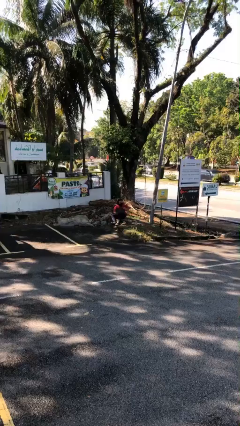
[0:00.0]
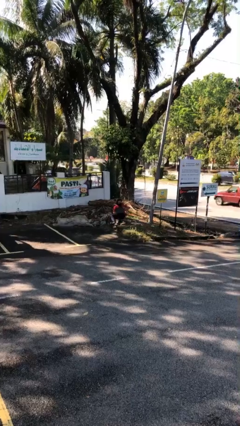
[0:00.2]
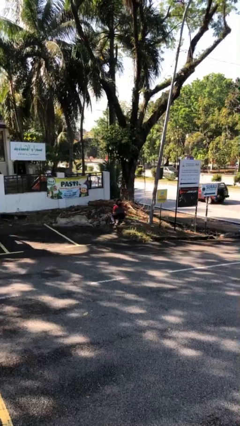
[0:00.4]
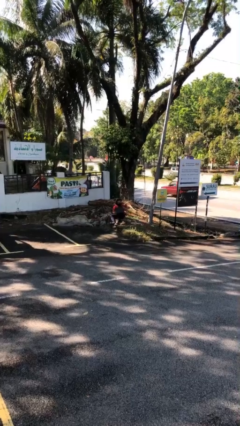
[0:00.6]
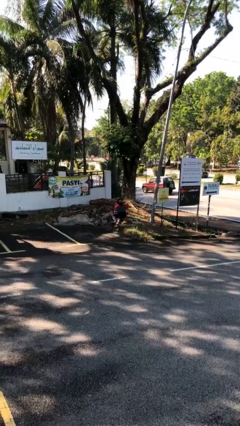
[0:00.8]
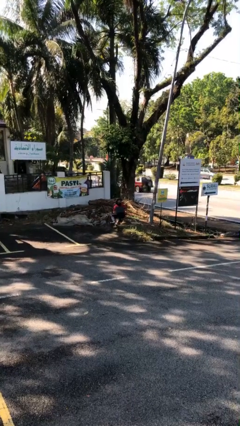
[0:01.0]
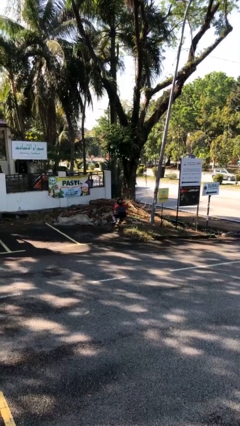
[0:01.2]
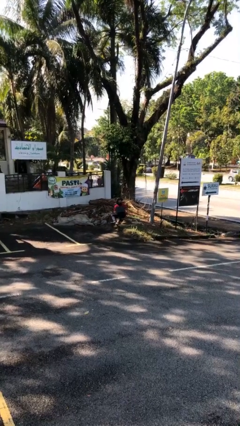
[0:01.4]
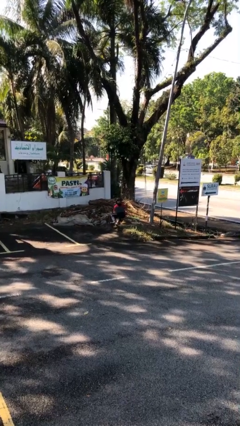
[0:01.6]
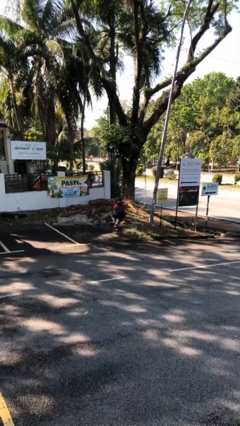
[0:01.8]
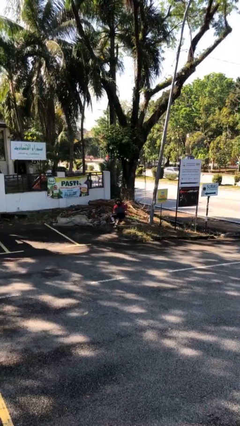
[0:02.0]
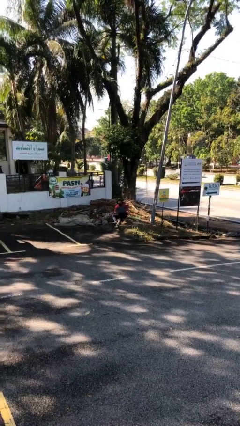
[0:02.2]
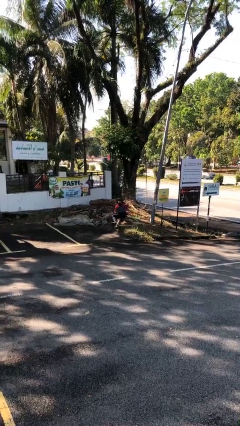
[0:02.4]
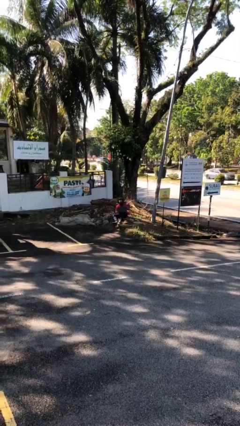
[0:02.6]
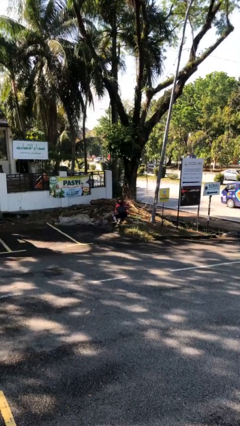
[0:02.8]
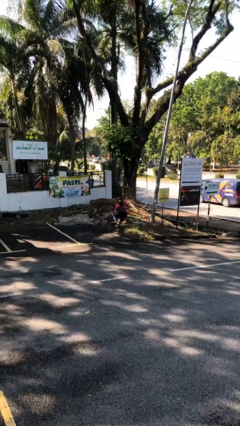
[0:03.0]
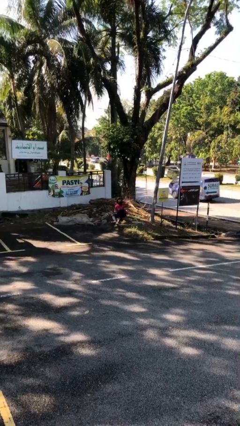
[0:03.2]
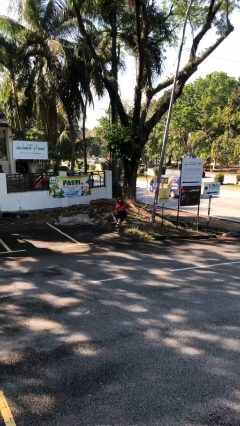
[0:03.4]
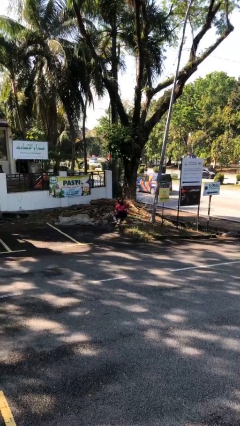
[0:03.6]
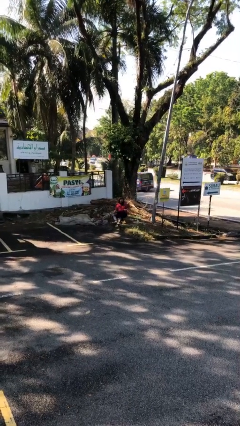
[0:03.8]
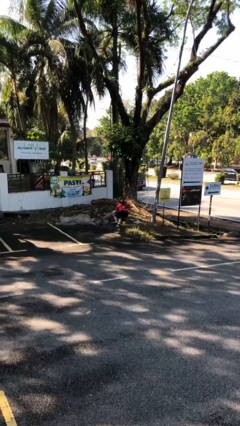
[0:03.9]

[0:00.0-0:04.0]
person interacts with laptop

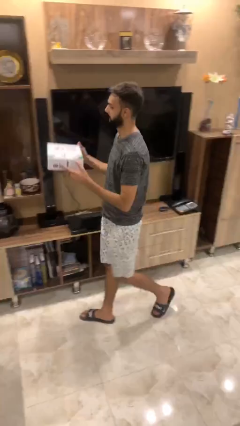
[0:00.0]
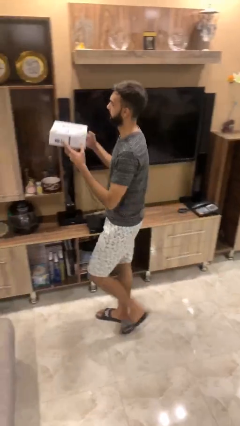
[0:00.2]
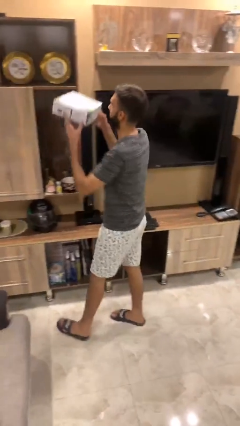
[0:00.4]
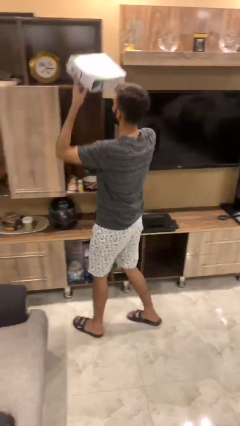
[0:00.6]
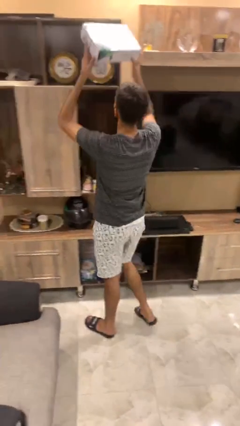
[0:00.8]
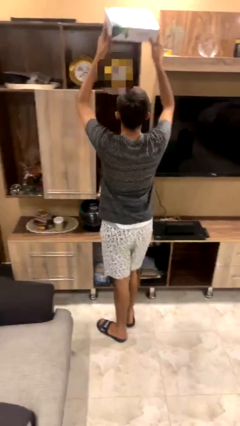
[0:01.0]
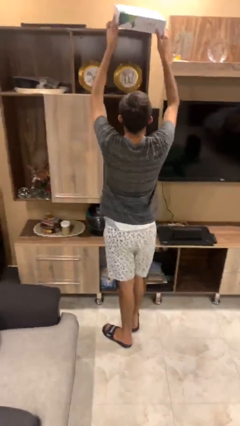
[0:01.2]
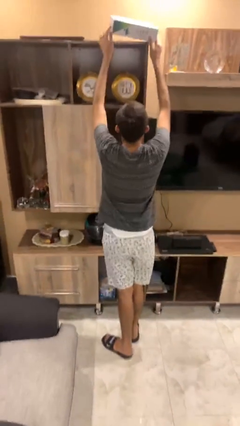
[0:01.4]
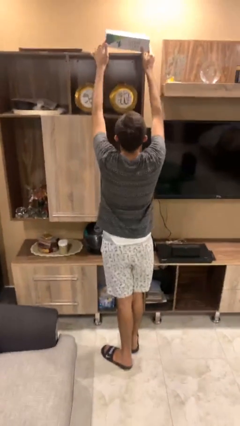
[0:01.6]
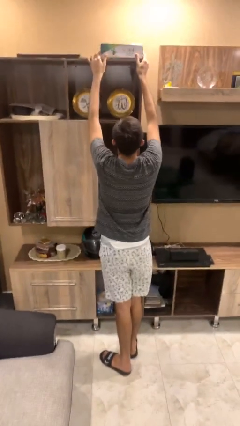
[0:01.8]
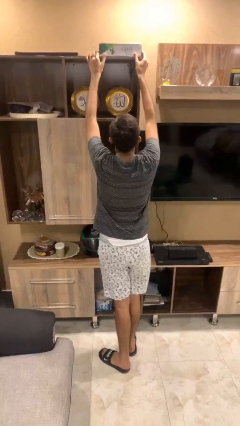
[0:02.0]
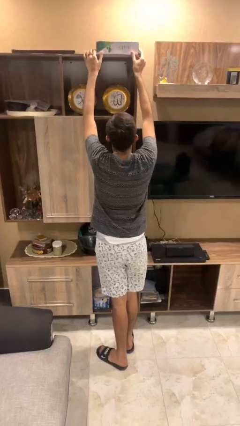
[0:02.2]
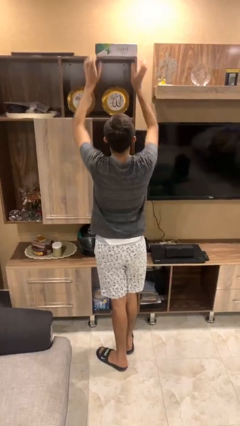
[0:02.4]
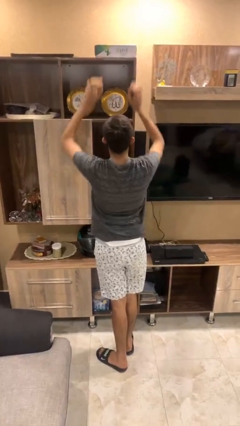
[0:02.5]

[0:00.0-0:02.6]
person puts down object on shelf

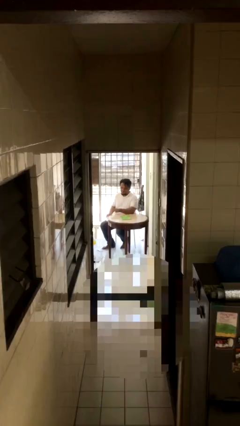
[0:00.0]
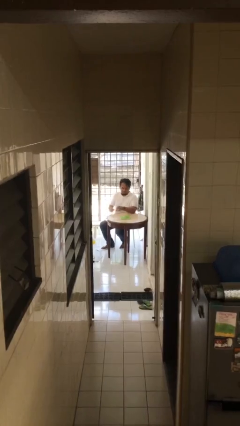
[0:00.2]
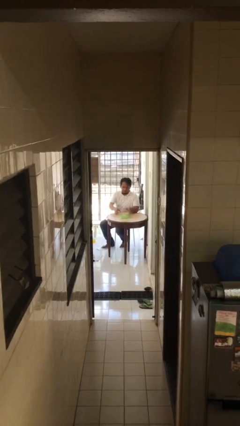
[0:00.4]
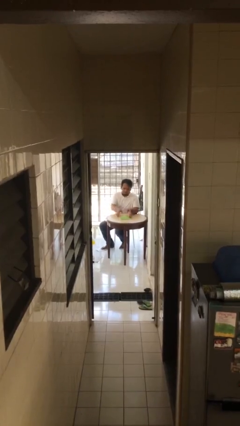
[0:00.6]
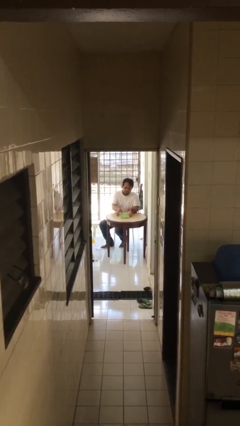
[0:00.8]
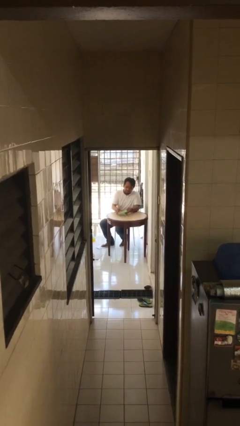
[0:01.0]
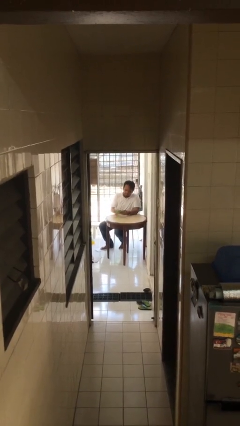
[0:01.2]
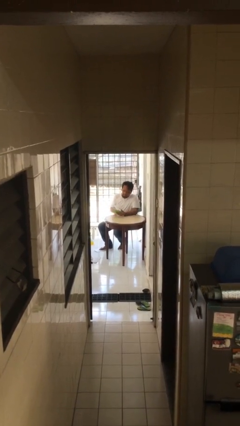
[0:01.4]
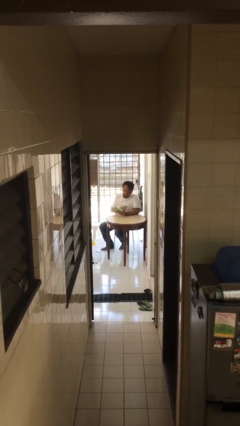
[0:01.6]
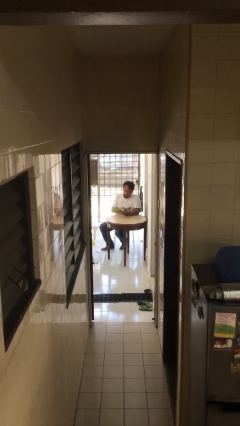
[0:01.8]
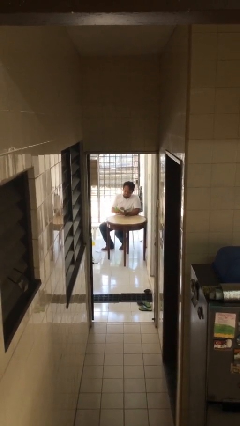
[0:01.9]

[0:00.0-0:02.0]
person picks up object from table

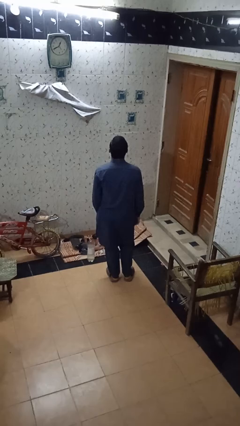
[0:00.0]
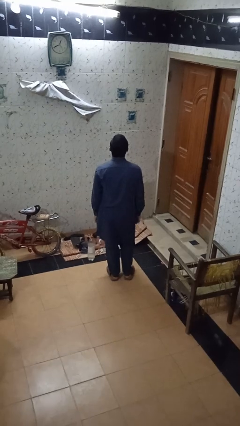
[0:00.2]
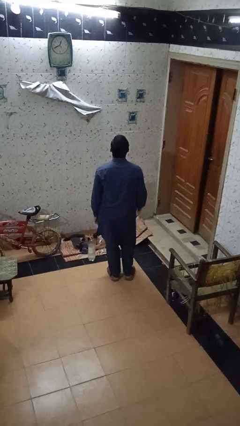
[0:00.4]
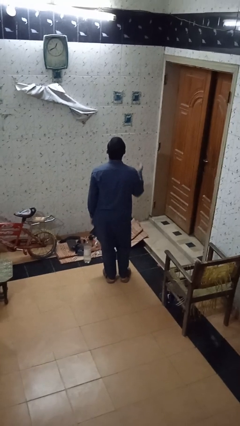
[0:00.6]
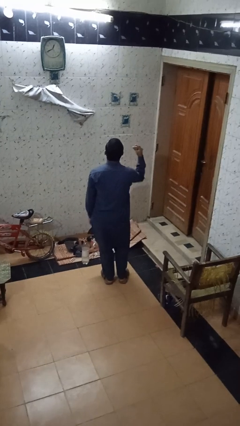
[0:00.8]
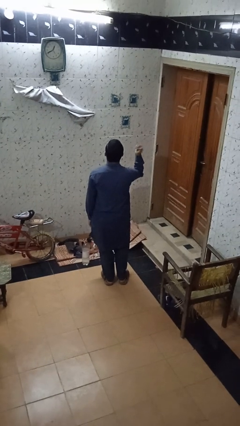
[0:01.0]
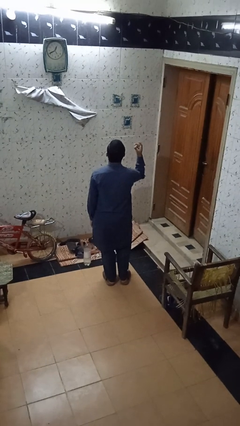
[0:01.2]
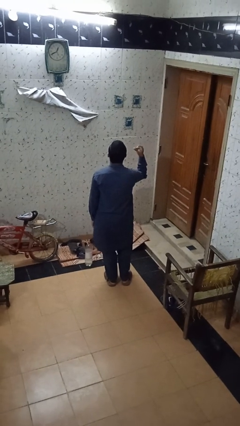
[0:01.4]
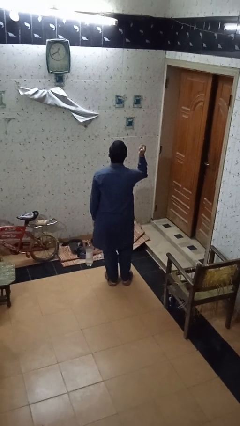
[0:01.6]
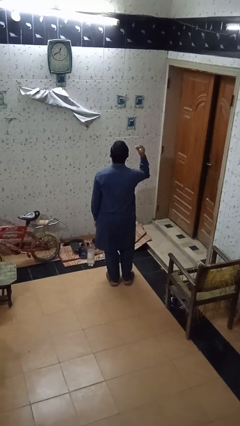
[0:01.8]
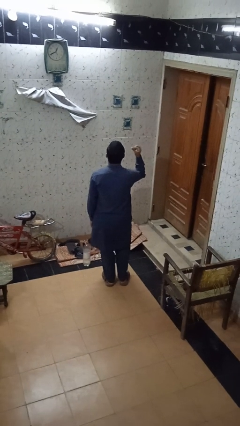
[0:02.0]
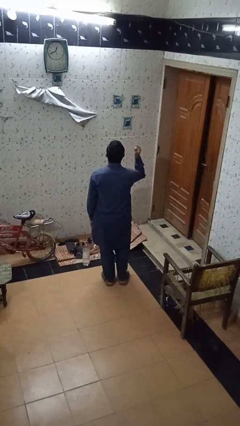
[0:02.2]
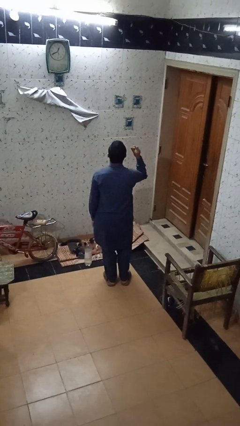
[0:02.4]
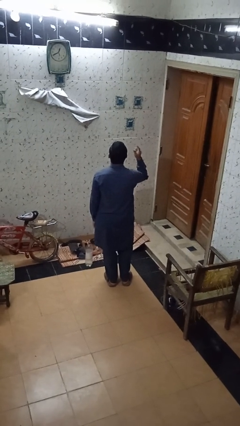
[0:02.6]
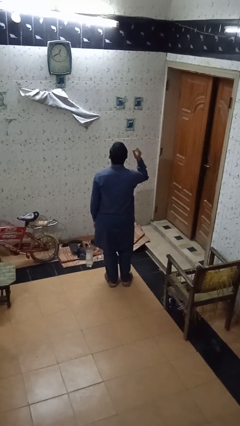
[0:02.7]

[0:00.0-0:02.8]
person snaps fingers

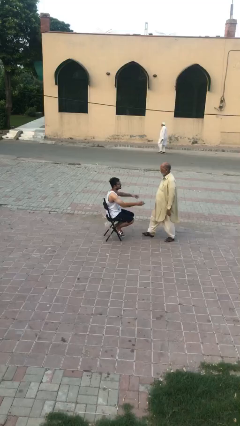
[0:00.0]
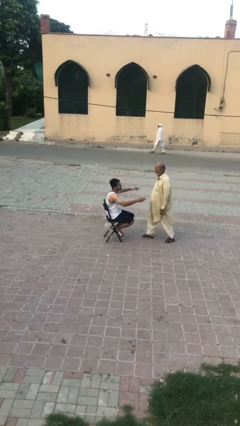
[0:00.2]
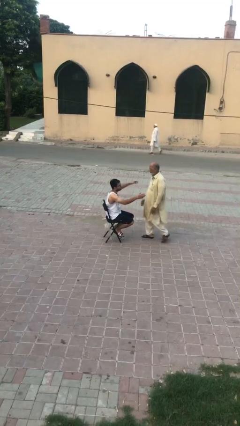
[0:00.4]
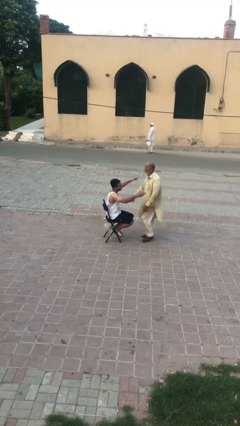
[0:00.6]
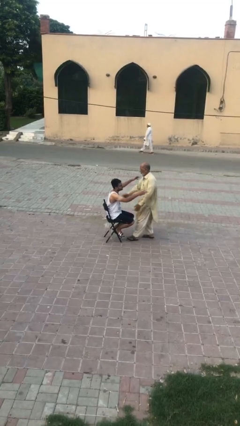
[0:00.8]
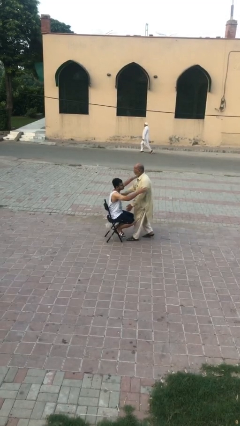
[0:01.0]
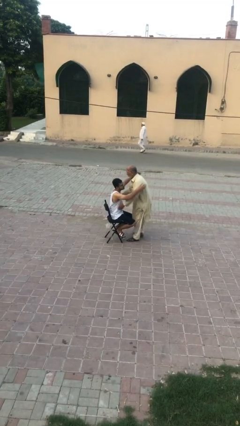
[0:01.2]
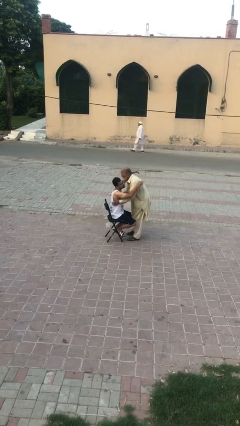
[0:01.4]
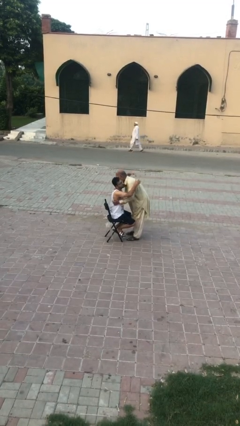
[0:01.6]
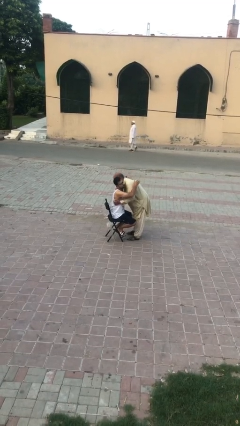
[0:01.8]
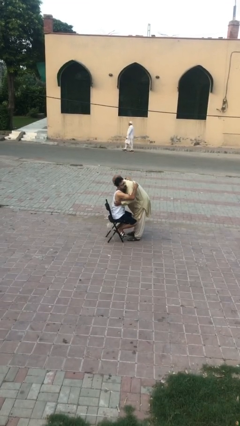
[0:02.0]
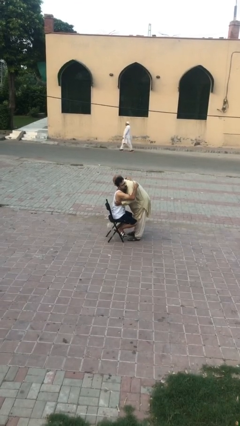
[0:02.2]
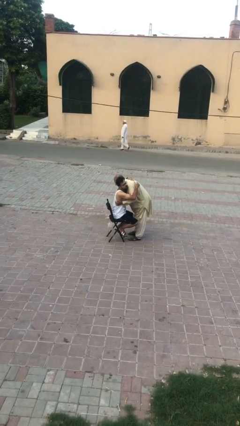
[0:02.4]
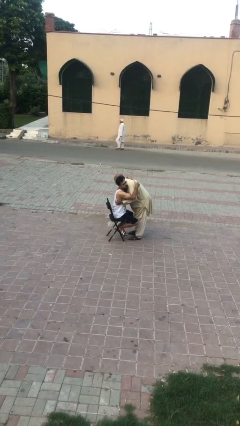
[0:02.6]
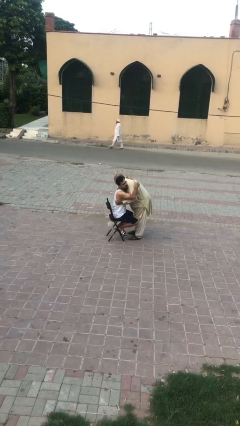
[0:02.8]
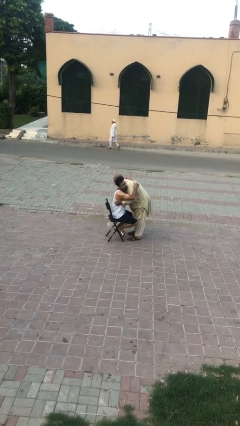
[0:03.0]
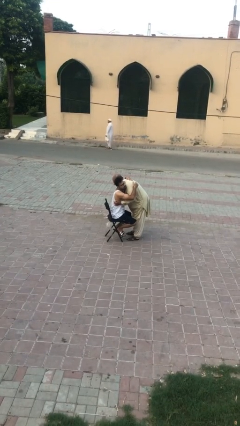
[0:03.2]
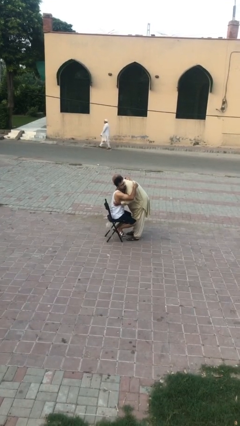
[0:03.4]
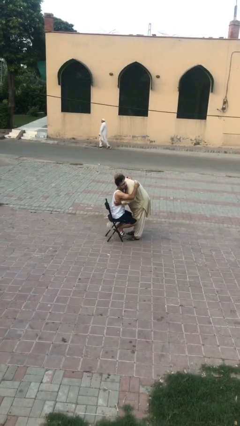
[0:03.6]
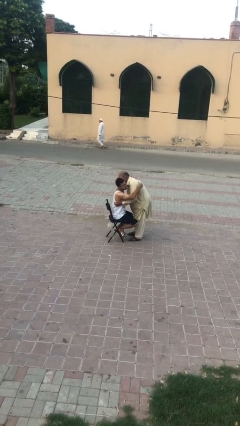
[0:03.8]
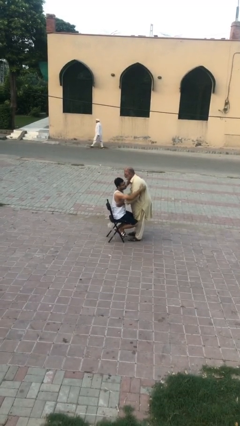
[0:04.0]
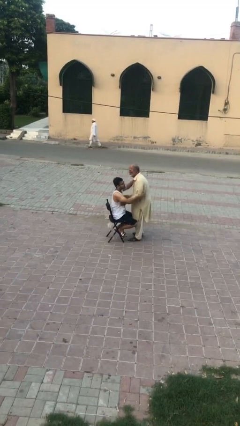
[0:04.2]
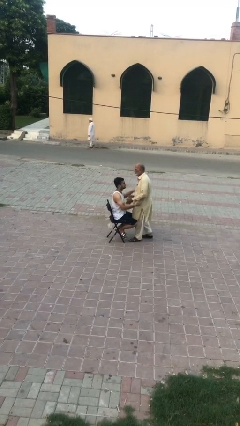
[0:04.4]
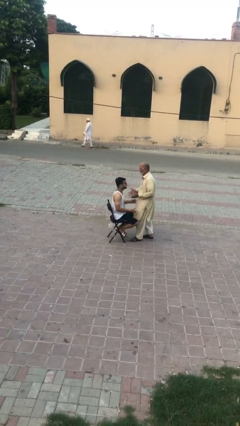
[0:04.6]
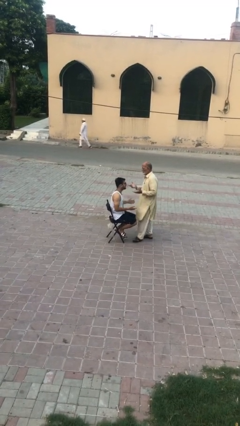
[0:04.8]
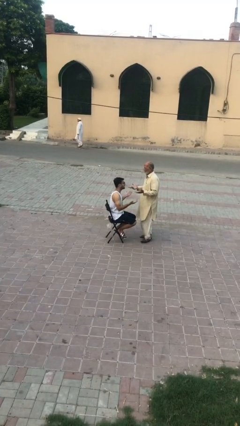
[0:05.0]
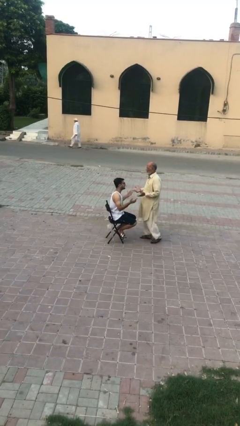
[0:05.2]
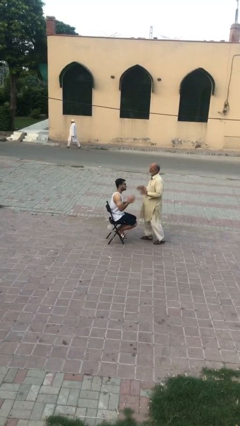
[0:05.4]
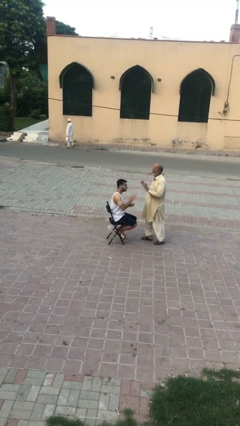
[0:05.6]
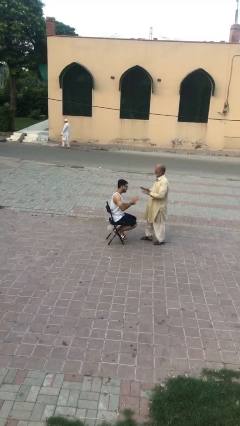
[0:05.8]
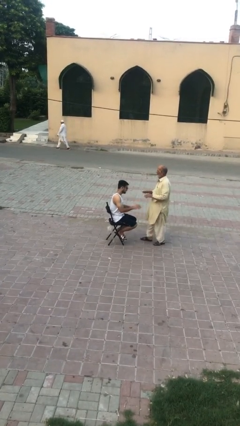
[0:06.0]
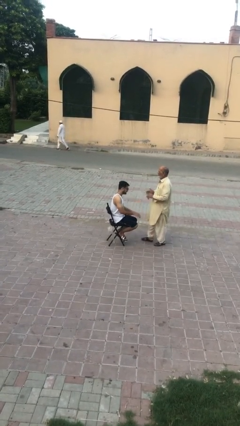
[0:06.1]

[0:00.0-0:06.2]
person embraces person

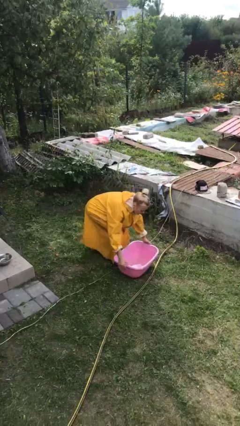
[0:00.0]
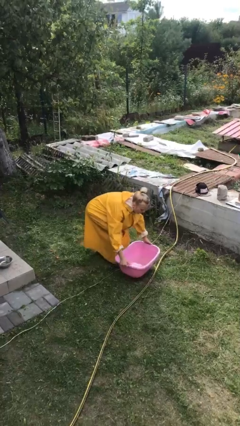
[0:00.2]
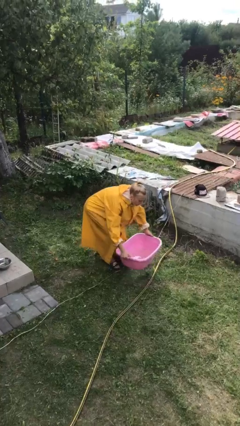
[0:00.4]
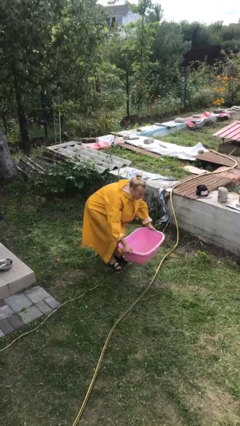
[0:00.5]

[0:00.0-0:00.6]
person picks up object from floor
